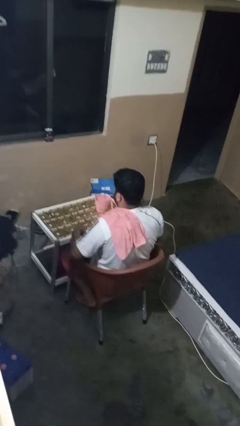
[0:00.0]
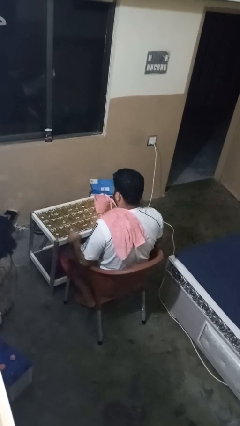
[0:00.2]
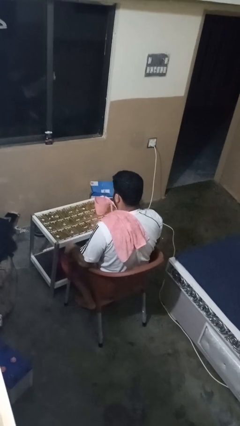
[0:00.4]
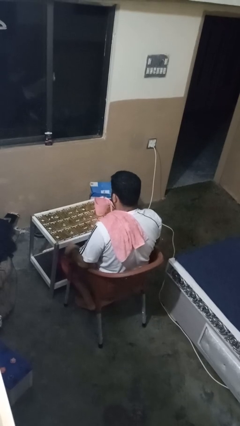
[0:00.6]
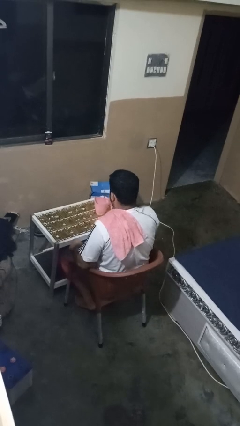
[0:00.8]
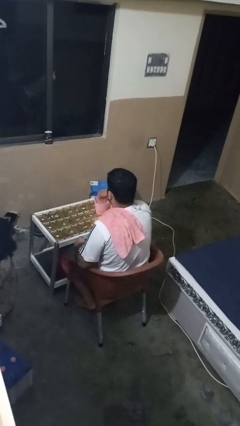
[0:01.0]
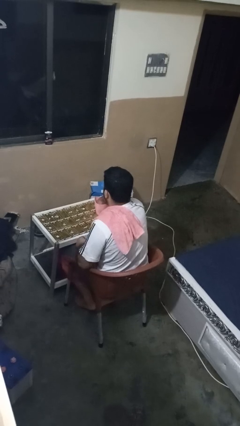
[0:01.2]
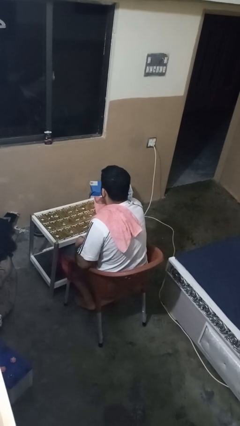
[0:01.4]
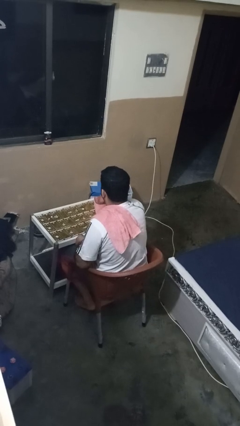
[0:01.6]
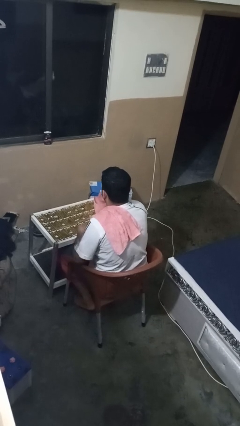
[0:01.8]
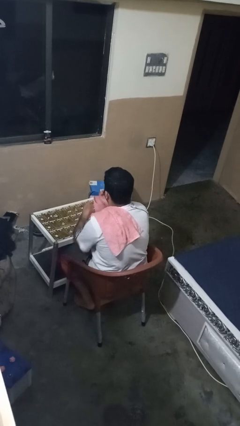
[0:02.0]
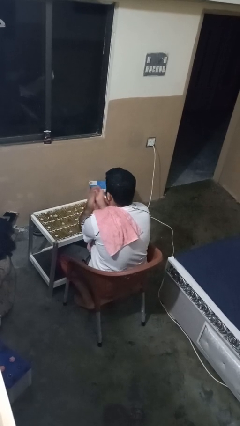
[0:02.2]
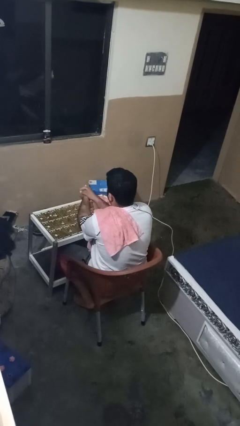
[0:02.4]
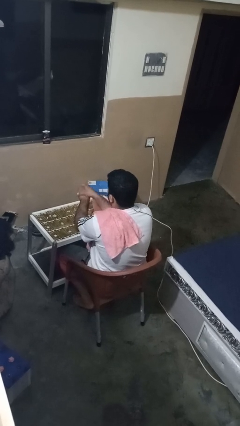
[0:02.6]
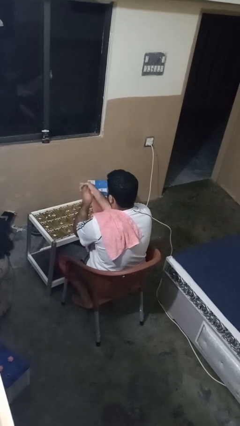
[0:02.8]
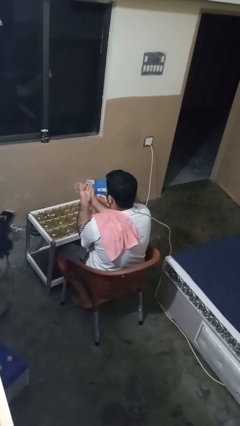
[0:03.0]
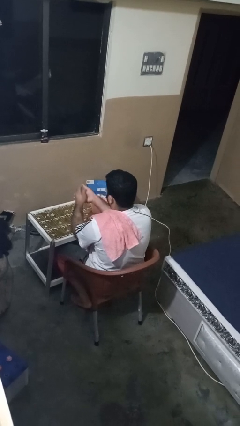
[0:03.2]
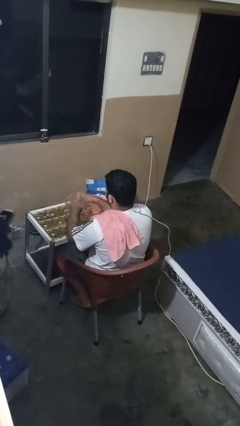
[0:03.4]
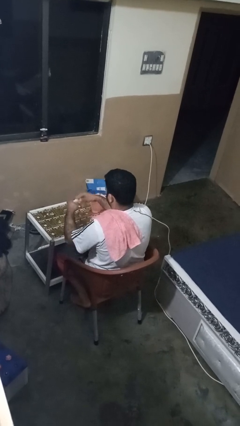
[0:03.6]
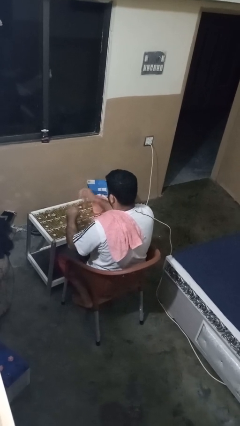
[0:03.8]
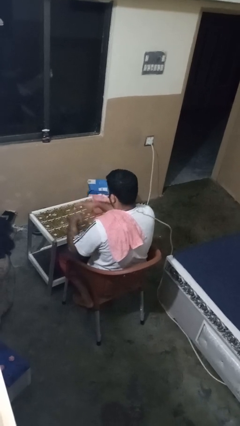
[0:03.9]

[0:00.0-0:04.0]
person washes hands

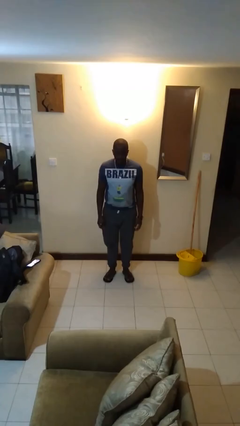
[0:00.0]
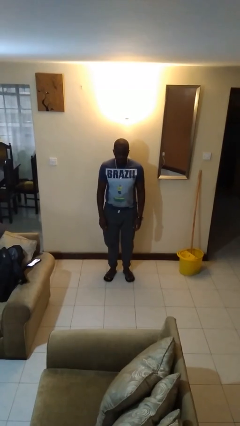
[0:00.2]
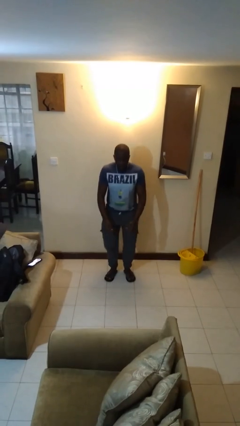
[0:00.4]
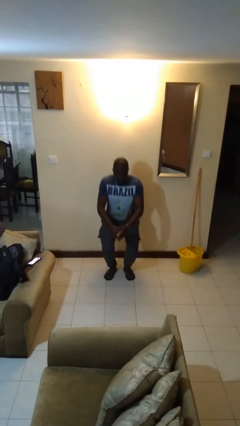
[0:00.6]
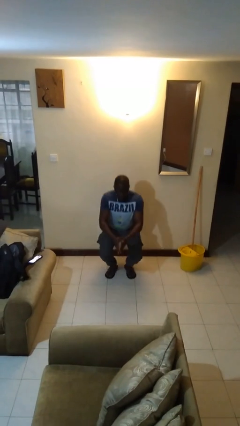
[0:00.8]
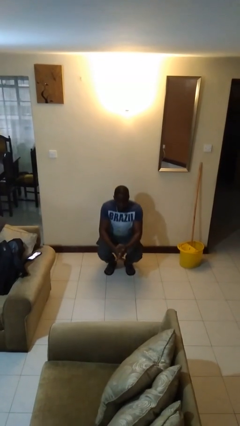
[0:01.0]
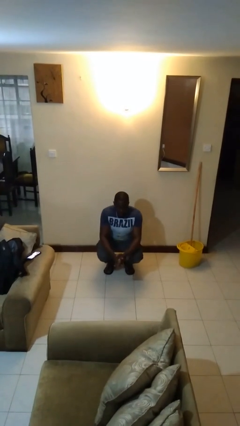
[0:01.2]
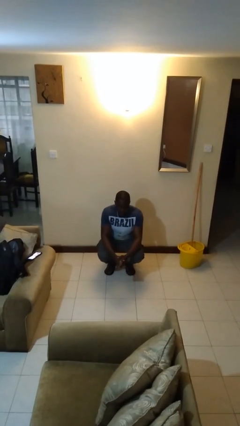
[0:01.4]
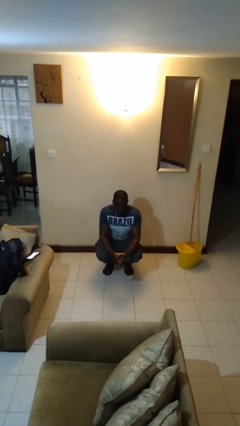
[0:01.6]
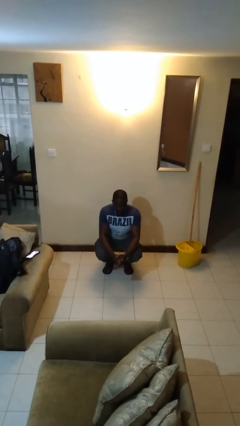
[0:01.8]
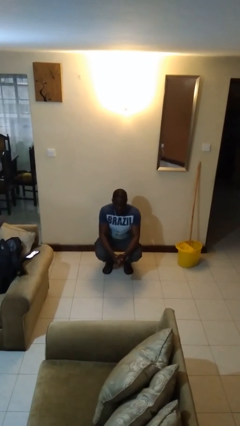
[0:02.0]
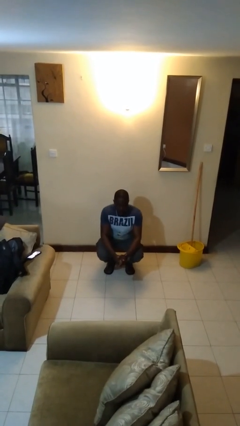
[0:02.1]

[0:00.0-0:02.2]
person squats

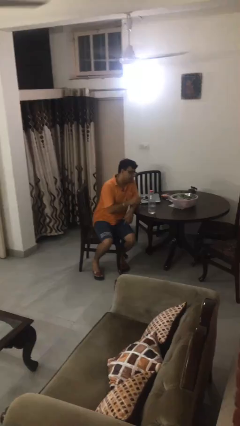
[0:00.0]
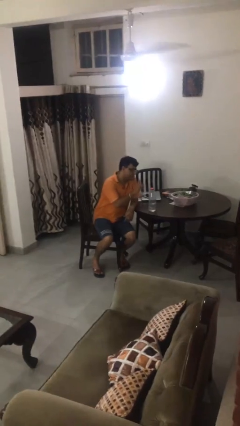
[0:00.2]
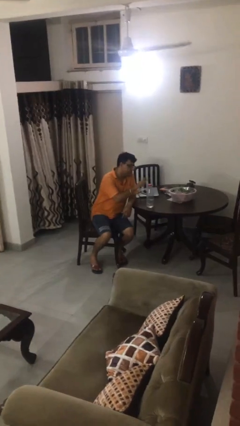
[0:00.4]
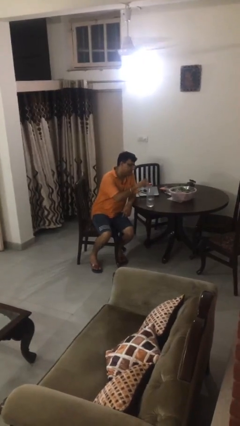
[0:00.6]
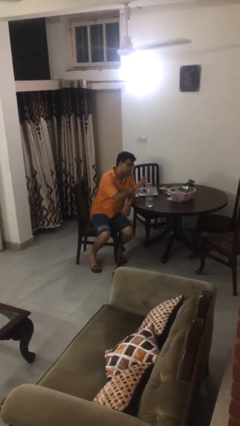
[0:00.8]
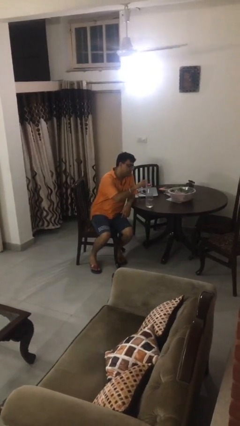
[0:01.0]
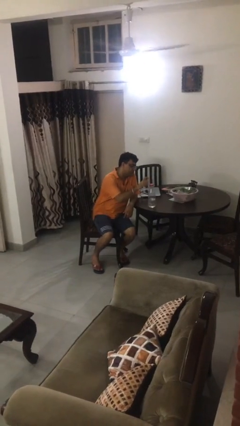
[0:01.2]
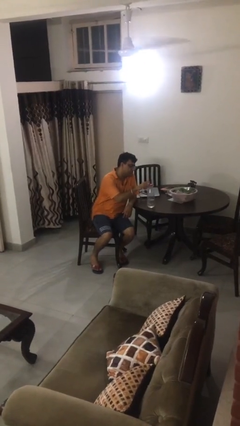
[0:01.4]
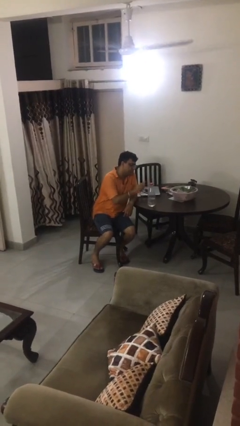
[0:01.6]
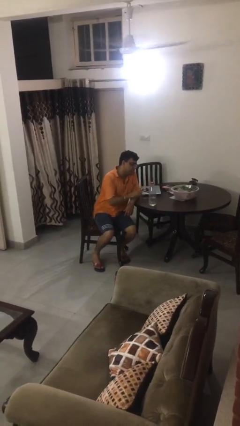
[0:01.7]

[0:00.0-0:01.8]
person taps object with finger

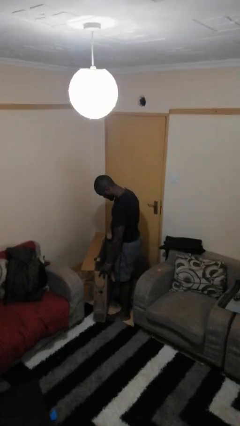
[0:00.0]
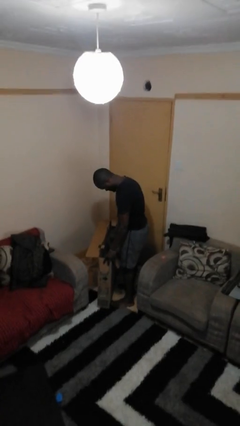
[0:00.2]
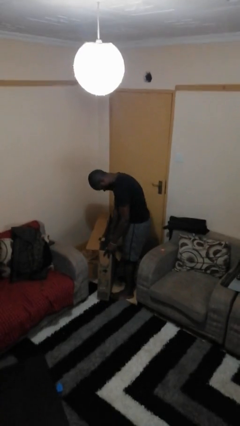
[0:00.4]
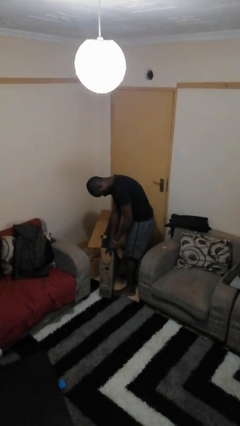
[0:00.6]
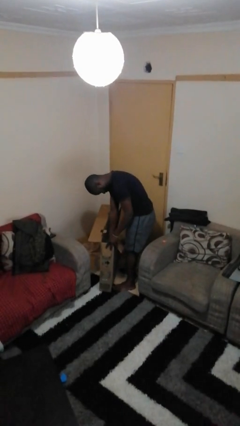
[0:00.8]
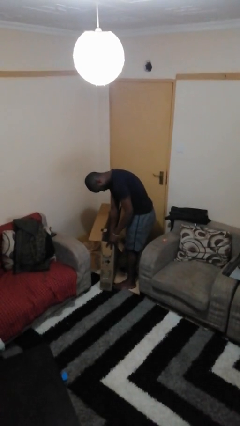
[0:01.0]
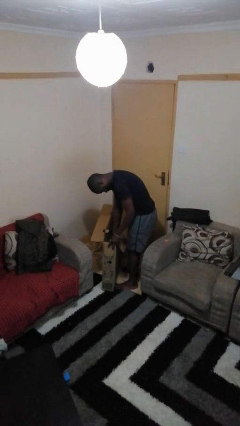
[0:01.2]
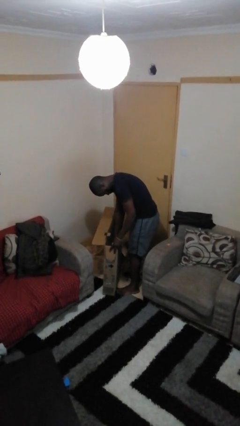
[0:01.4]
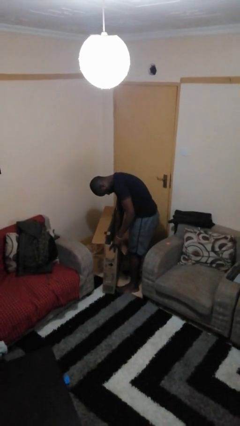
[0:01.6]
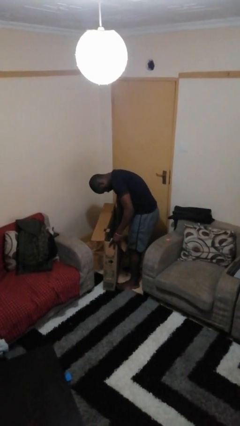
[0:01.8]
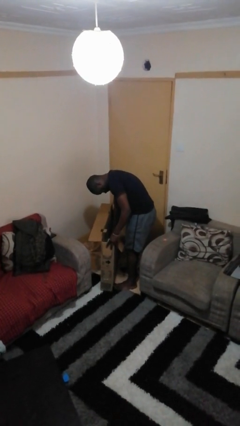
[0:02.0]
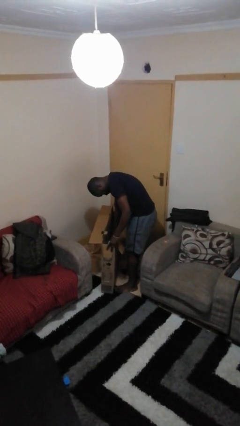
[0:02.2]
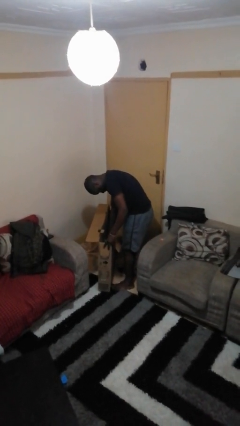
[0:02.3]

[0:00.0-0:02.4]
person searches in box

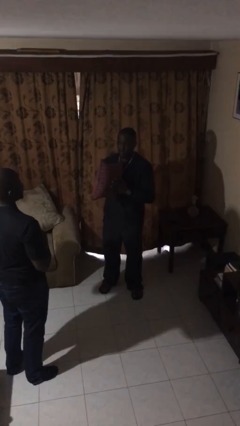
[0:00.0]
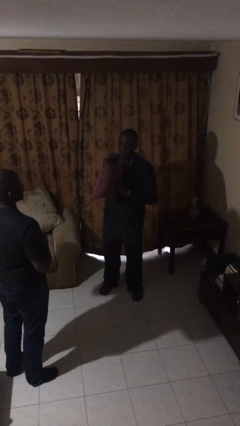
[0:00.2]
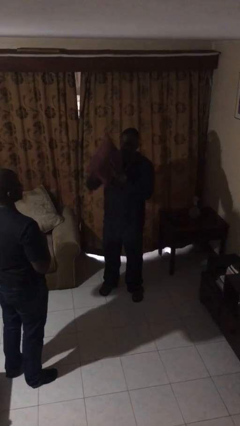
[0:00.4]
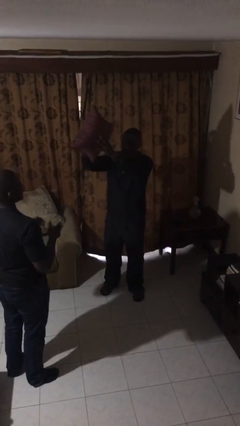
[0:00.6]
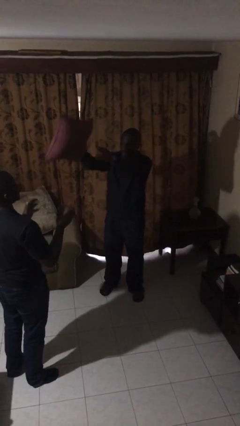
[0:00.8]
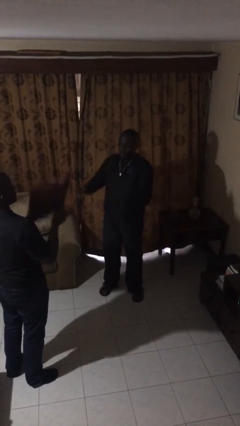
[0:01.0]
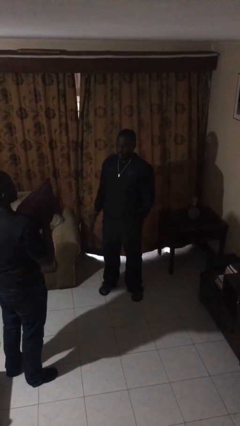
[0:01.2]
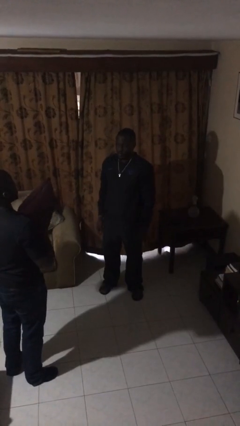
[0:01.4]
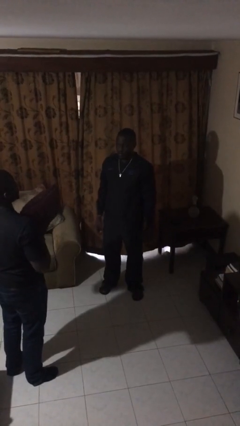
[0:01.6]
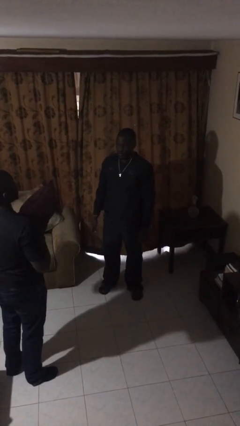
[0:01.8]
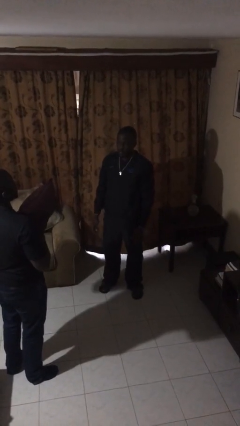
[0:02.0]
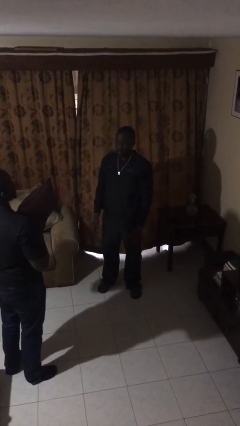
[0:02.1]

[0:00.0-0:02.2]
person throws object to person

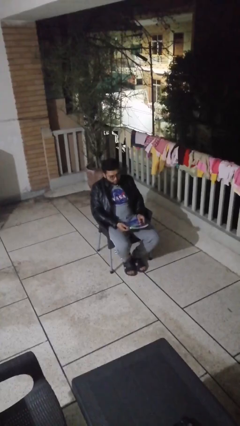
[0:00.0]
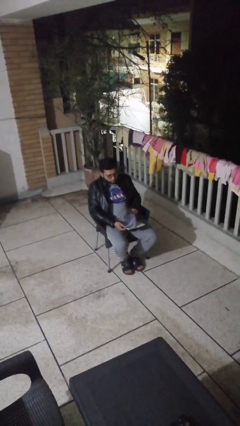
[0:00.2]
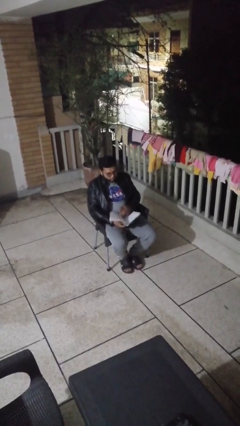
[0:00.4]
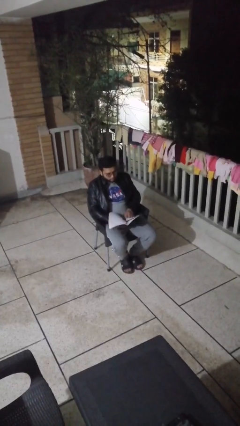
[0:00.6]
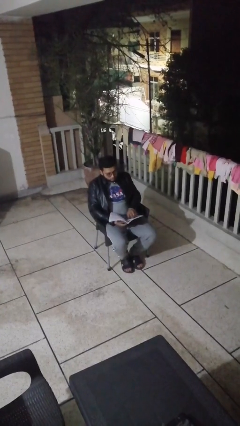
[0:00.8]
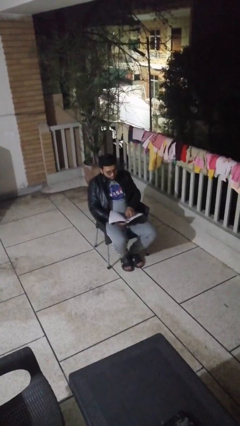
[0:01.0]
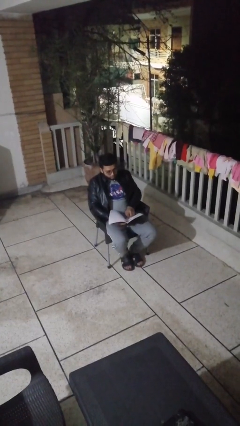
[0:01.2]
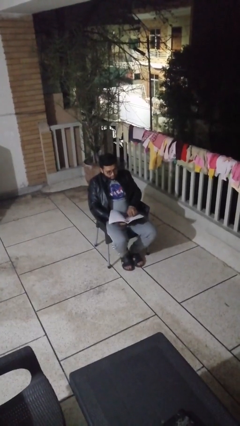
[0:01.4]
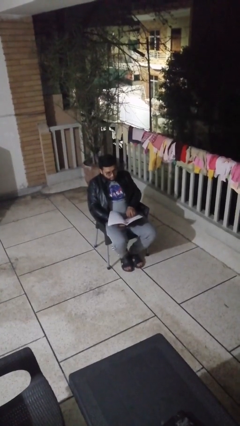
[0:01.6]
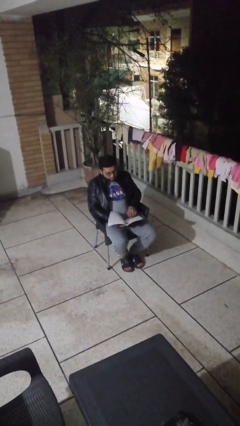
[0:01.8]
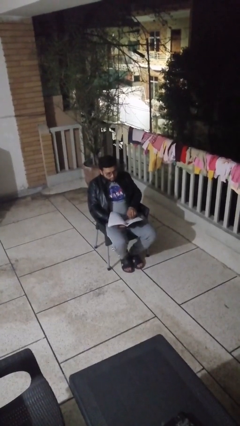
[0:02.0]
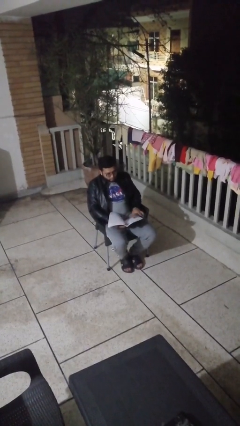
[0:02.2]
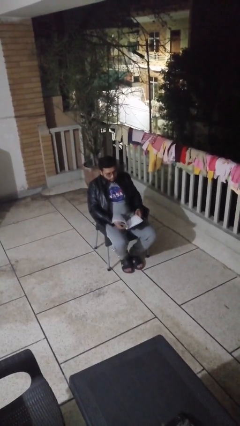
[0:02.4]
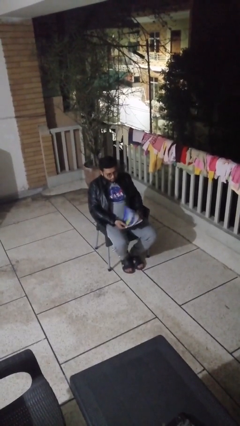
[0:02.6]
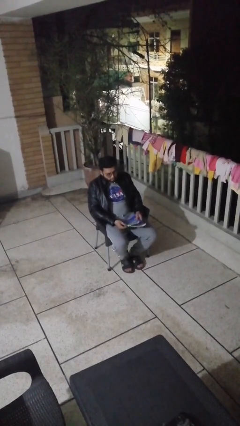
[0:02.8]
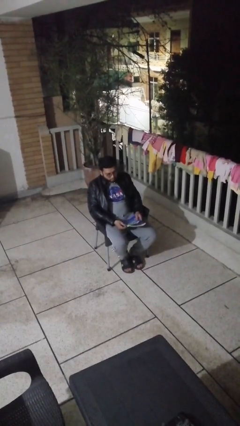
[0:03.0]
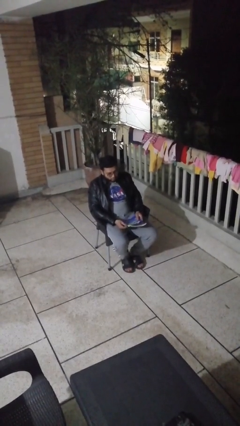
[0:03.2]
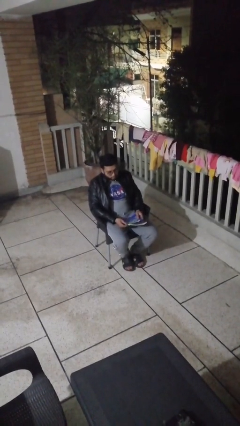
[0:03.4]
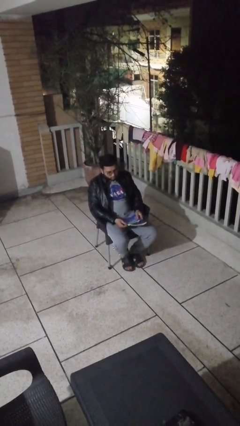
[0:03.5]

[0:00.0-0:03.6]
person reads document

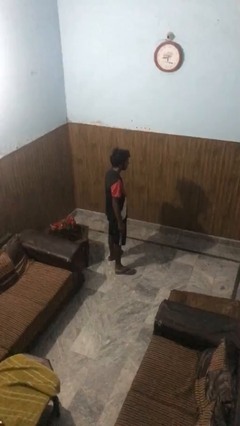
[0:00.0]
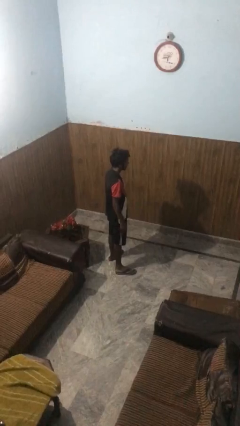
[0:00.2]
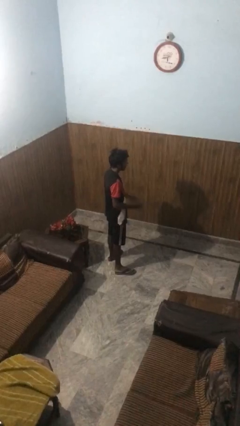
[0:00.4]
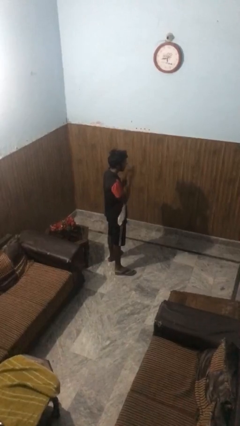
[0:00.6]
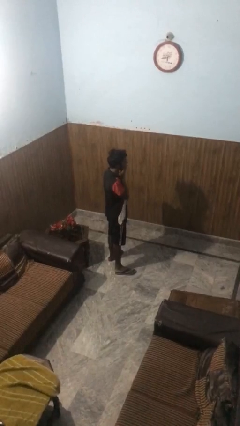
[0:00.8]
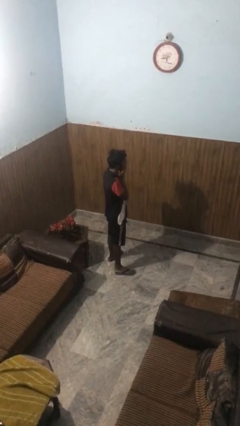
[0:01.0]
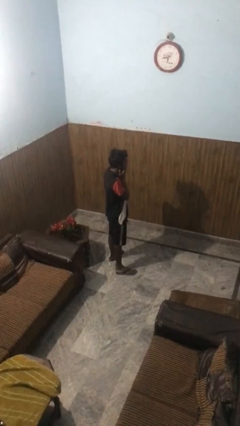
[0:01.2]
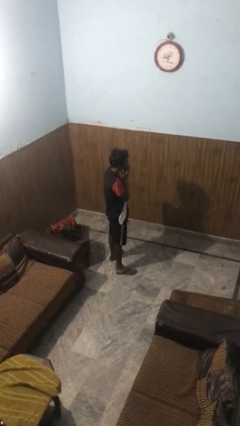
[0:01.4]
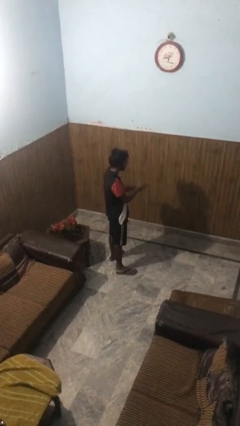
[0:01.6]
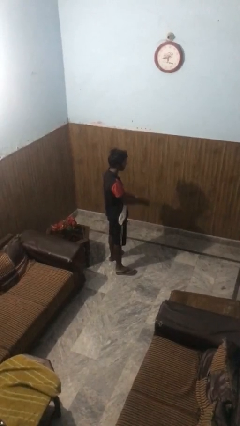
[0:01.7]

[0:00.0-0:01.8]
person covers face with hands
